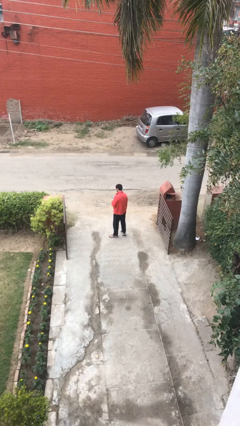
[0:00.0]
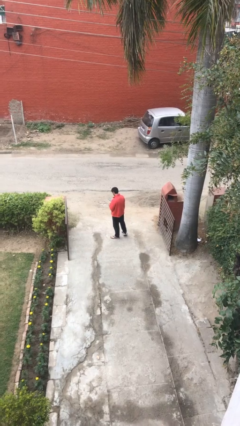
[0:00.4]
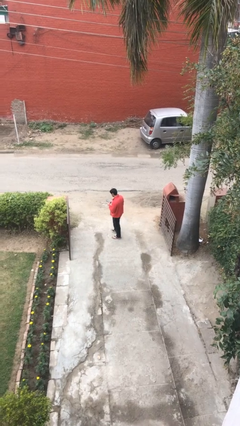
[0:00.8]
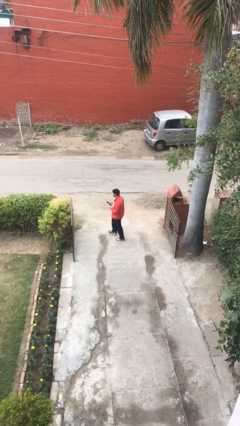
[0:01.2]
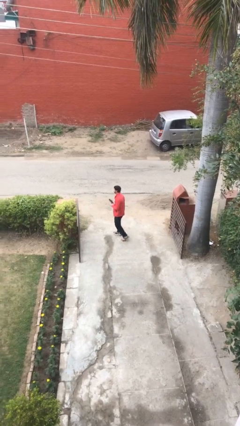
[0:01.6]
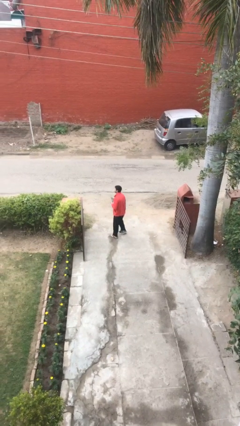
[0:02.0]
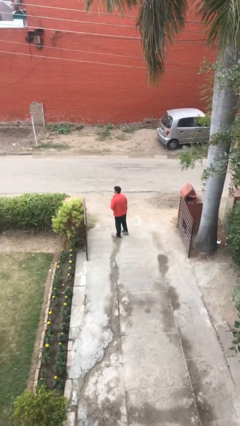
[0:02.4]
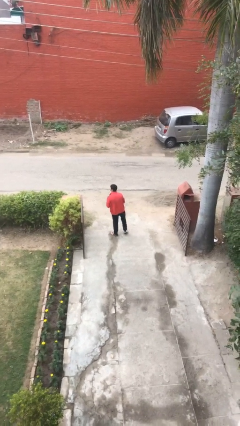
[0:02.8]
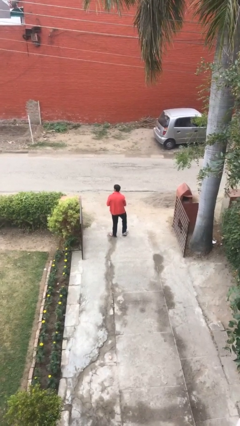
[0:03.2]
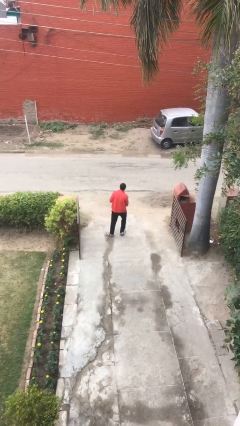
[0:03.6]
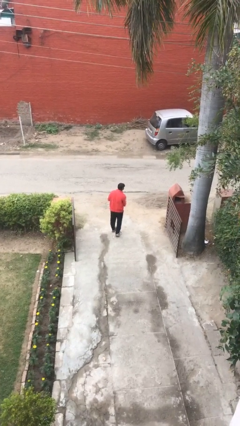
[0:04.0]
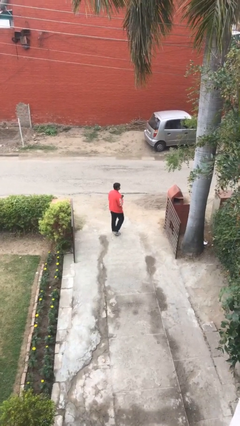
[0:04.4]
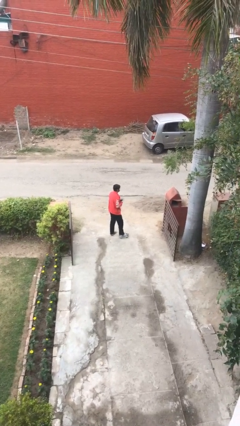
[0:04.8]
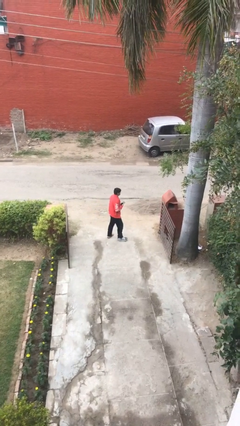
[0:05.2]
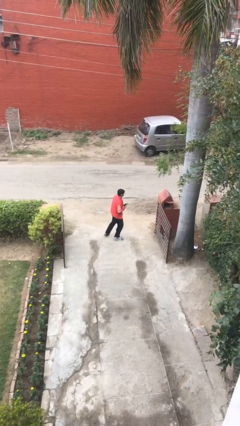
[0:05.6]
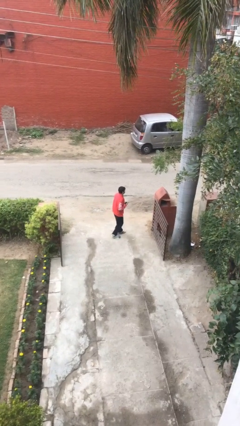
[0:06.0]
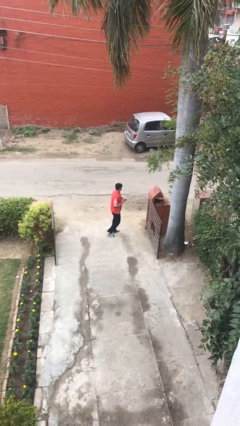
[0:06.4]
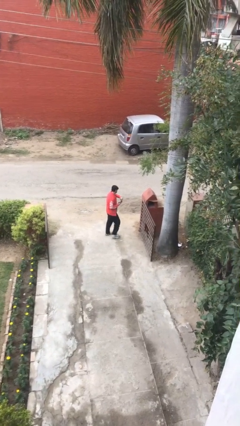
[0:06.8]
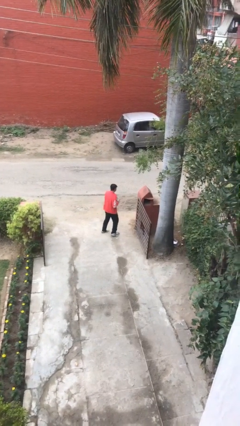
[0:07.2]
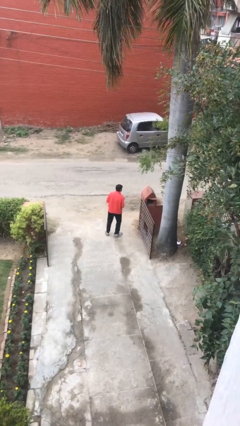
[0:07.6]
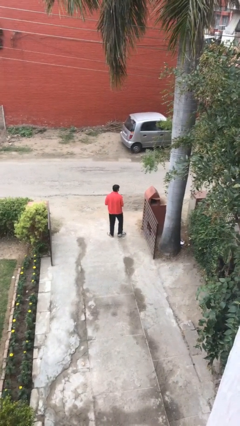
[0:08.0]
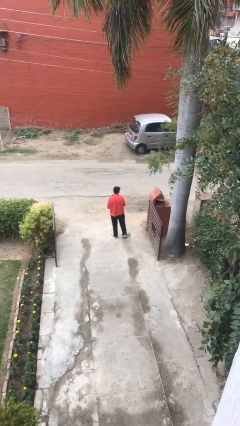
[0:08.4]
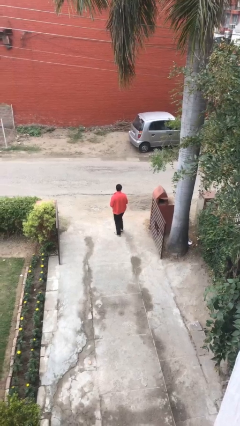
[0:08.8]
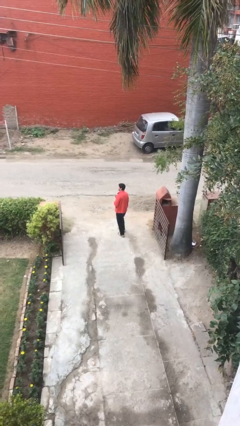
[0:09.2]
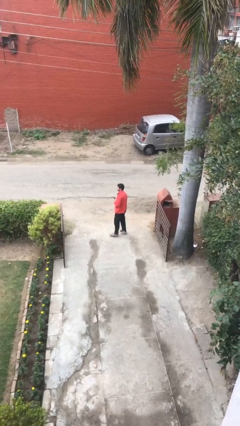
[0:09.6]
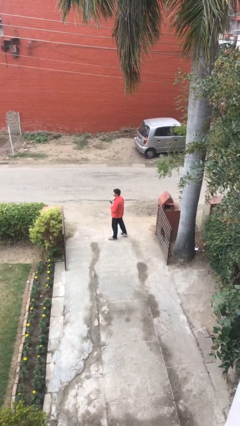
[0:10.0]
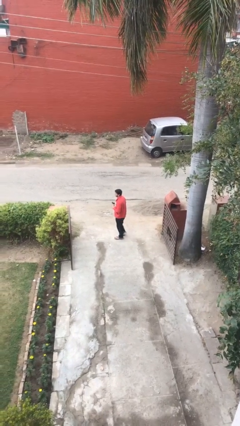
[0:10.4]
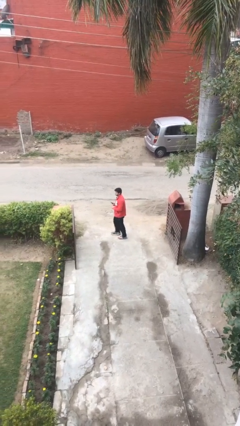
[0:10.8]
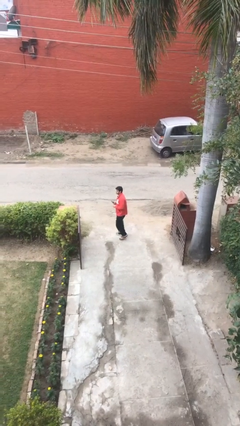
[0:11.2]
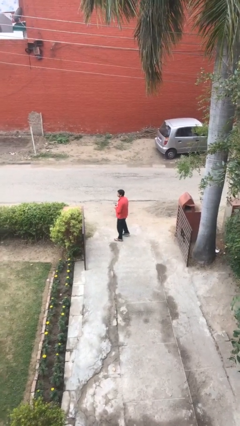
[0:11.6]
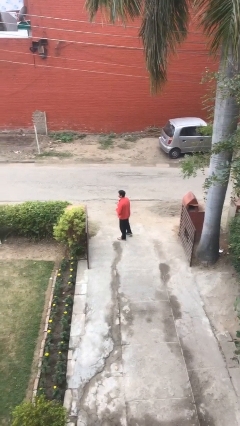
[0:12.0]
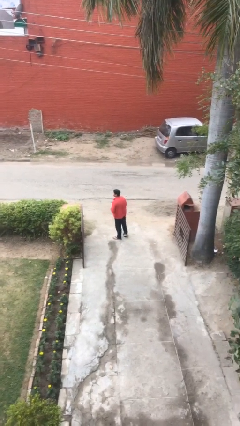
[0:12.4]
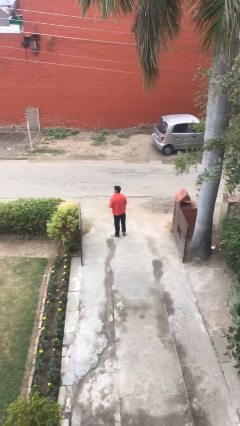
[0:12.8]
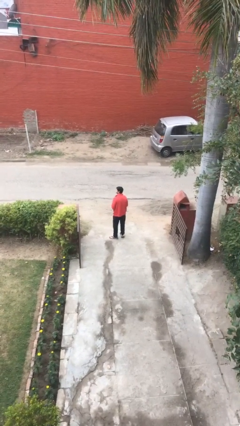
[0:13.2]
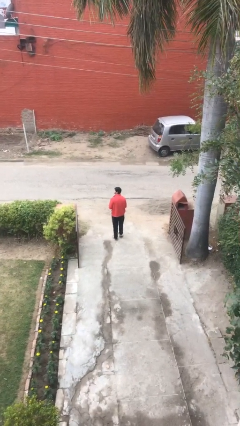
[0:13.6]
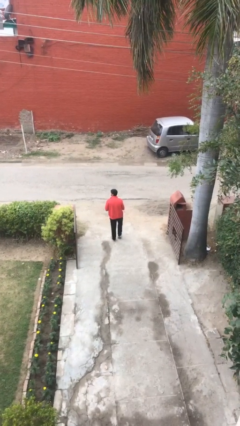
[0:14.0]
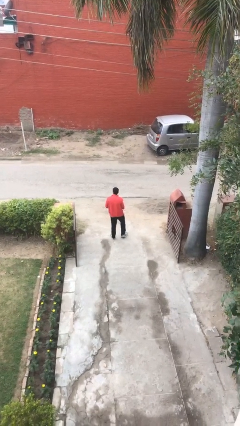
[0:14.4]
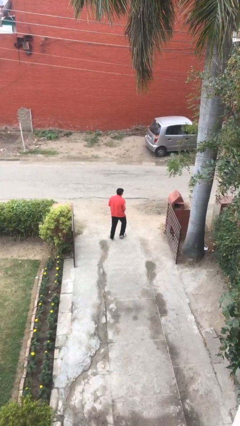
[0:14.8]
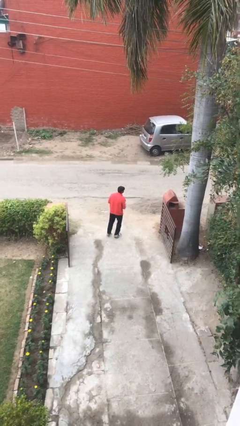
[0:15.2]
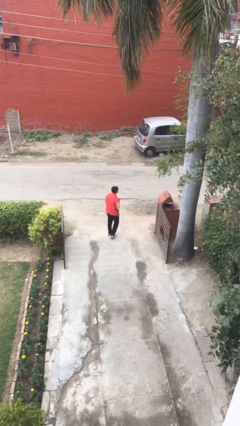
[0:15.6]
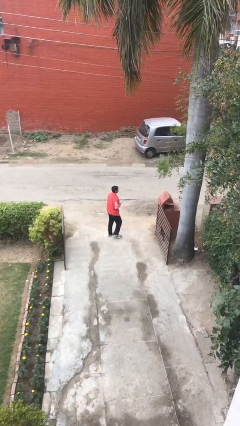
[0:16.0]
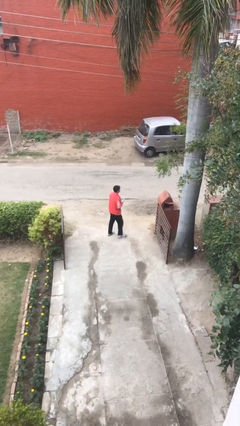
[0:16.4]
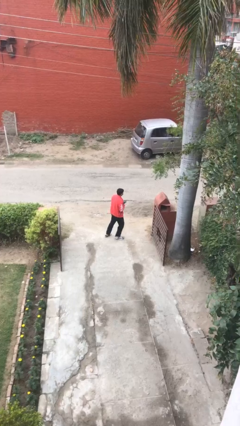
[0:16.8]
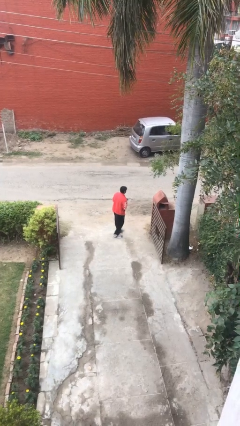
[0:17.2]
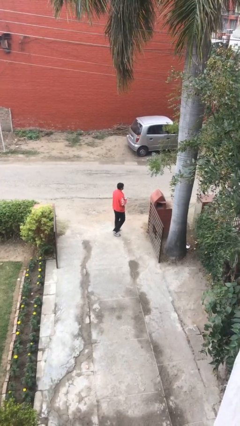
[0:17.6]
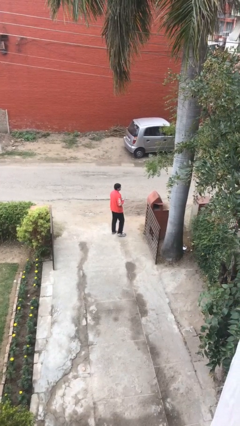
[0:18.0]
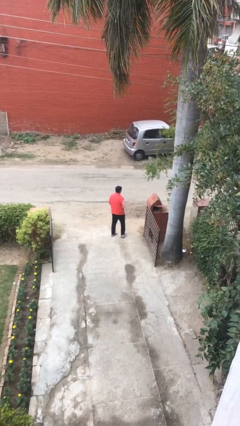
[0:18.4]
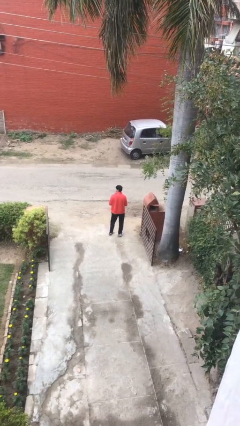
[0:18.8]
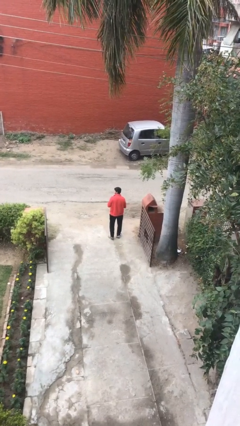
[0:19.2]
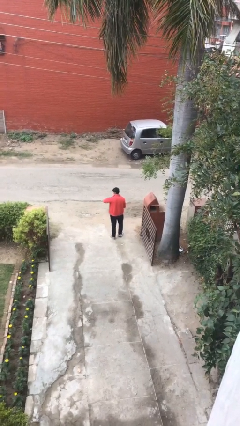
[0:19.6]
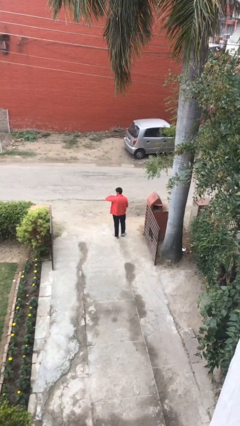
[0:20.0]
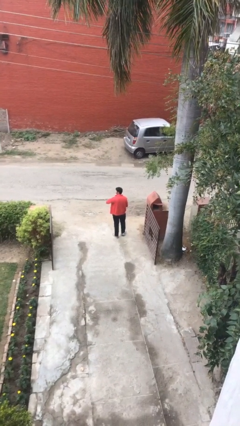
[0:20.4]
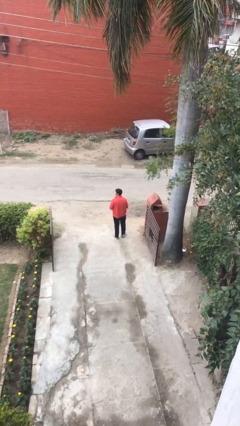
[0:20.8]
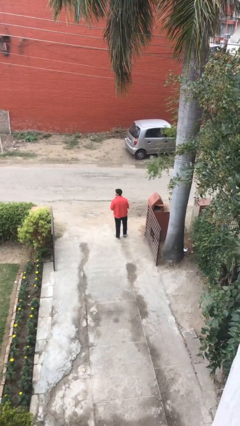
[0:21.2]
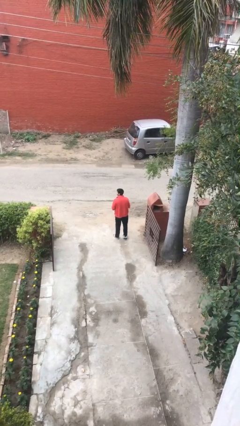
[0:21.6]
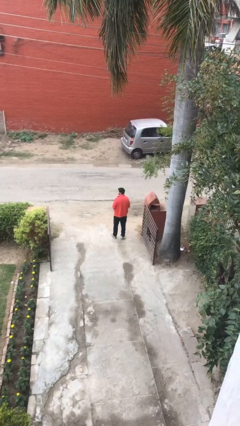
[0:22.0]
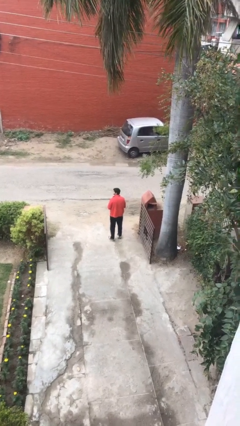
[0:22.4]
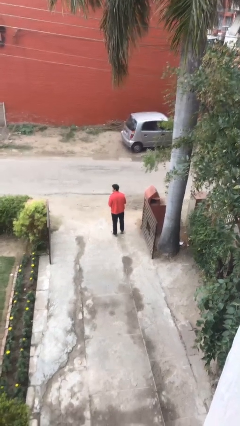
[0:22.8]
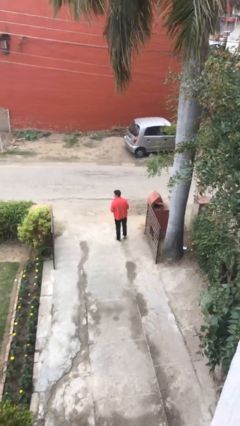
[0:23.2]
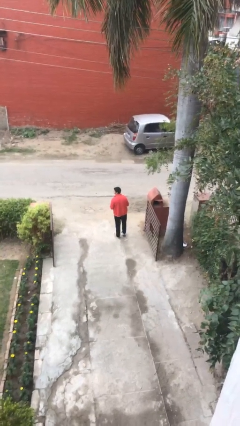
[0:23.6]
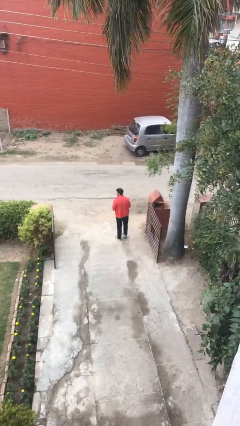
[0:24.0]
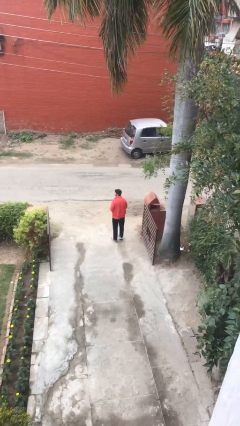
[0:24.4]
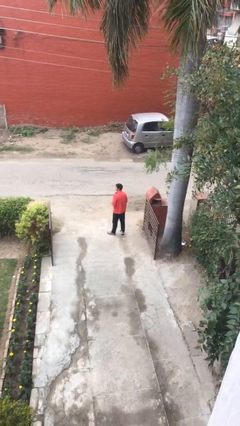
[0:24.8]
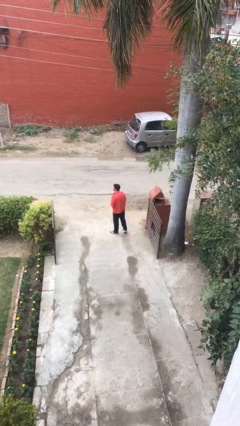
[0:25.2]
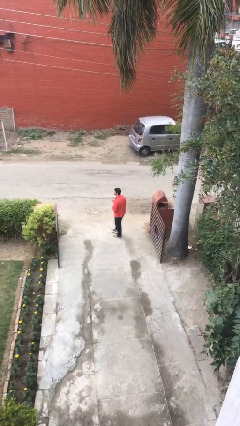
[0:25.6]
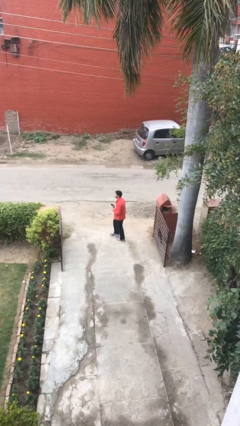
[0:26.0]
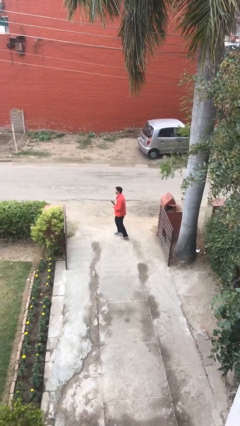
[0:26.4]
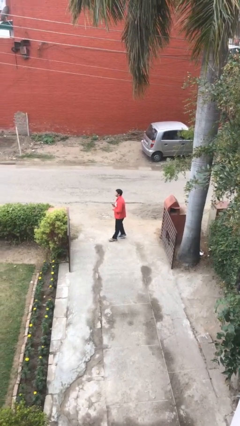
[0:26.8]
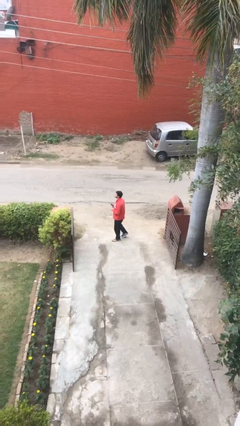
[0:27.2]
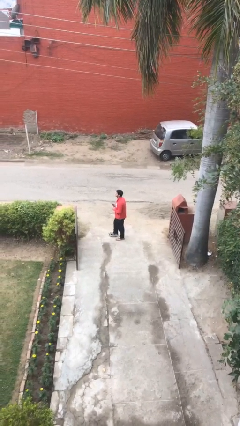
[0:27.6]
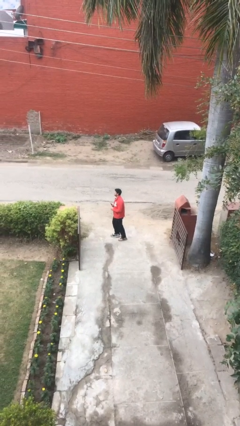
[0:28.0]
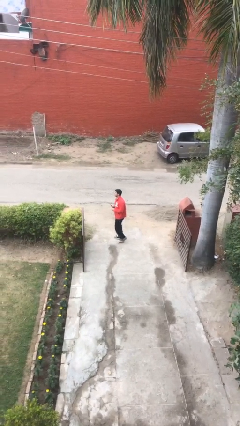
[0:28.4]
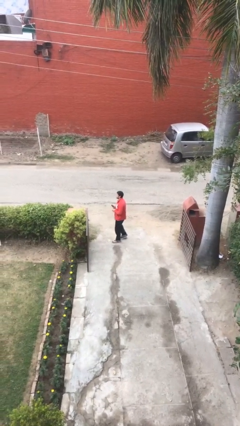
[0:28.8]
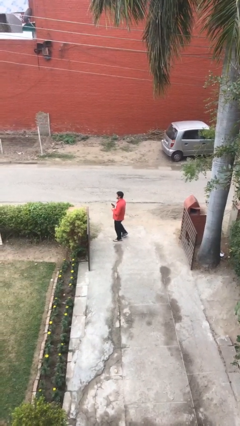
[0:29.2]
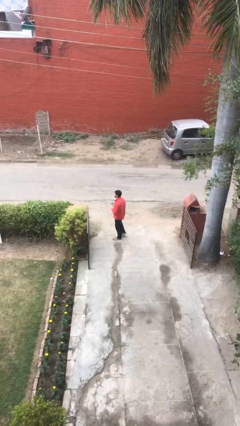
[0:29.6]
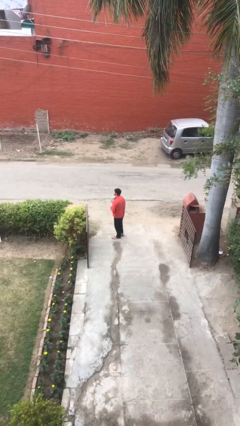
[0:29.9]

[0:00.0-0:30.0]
person walks
